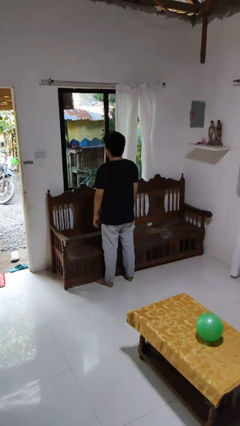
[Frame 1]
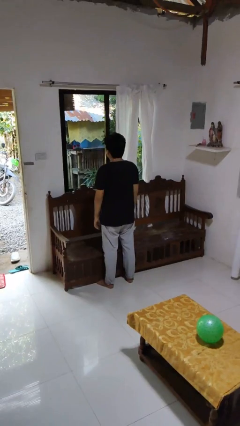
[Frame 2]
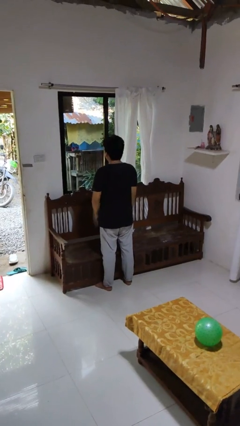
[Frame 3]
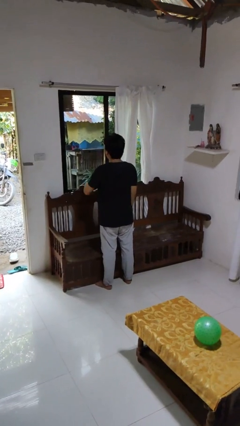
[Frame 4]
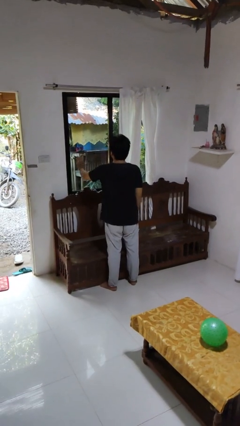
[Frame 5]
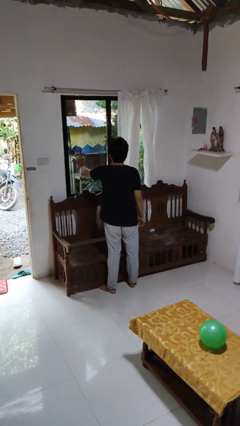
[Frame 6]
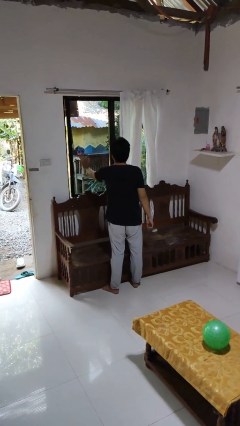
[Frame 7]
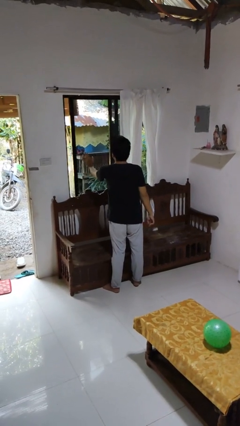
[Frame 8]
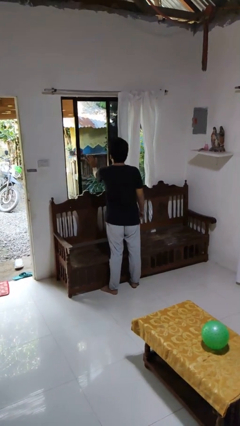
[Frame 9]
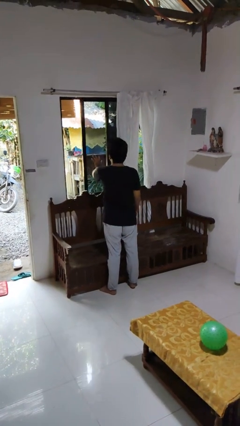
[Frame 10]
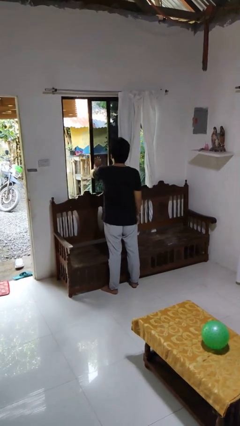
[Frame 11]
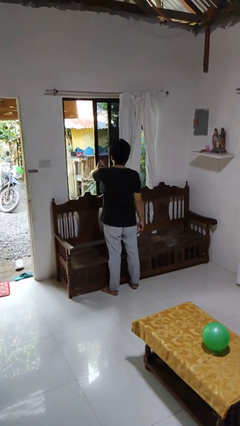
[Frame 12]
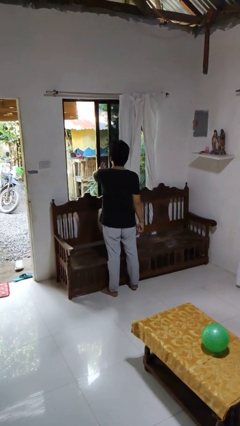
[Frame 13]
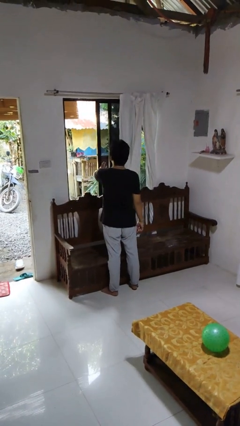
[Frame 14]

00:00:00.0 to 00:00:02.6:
person opens home window

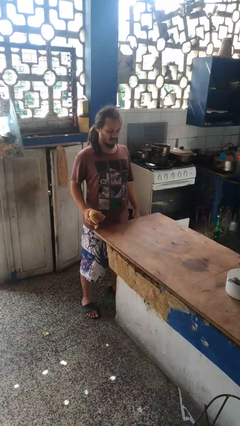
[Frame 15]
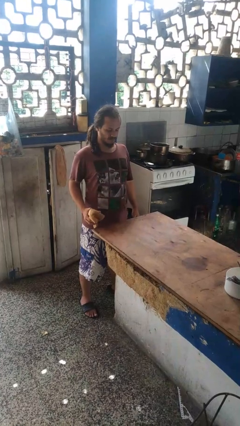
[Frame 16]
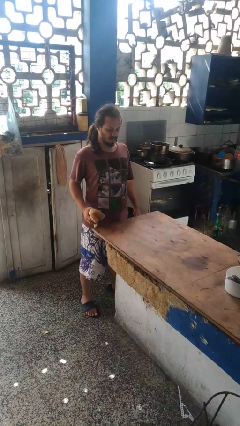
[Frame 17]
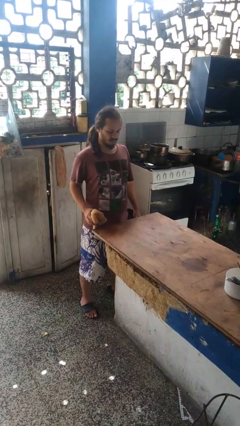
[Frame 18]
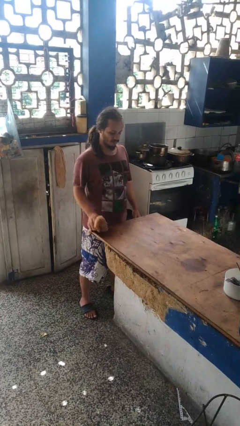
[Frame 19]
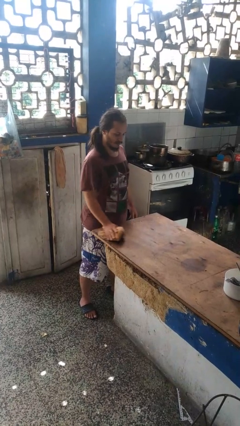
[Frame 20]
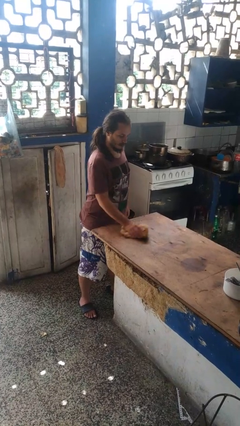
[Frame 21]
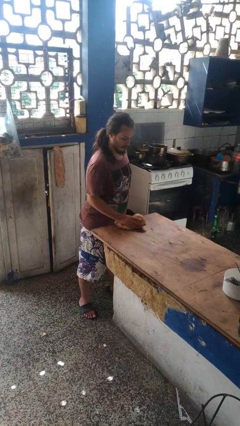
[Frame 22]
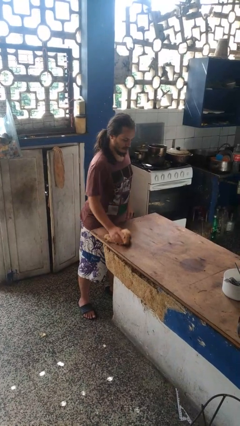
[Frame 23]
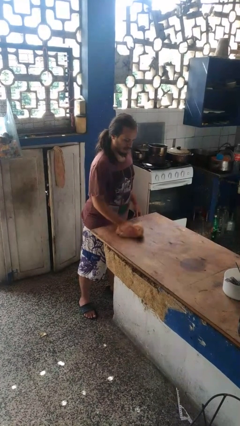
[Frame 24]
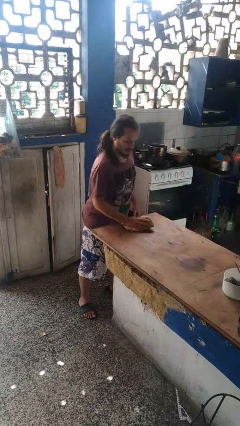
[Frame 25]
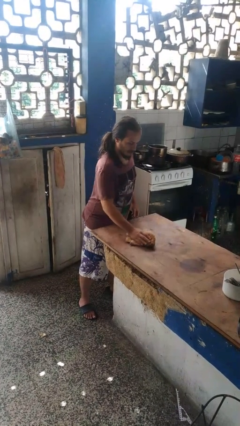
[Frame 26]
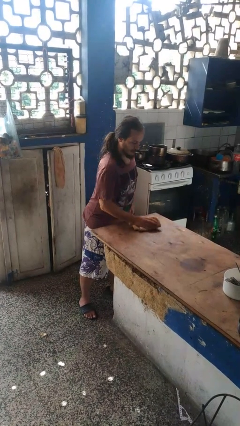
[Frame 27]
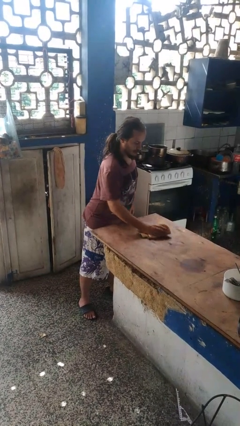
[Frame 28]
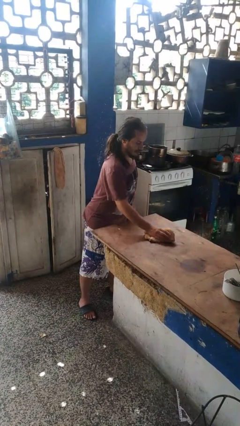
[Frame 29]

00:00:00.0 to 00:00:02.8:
person cleans table with rag

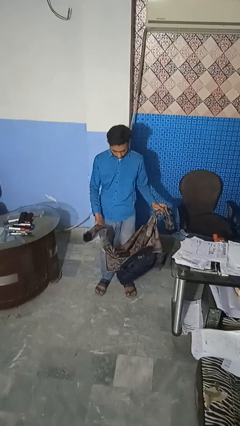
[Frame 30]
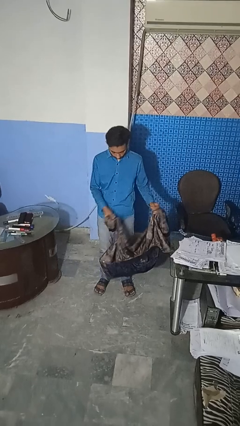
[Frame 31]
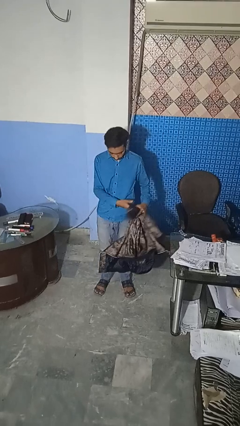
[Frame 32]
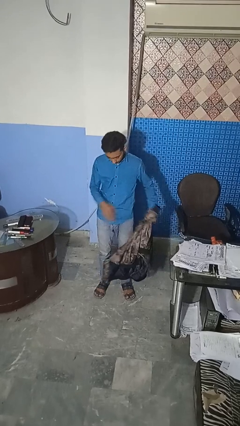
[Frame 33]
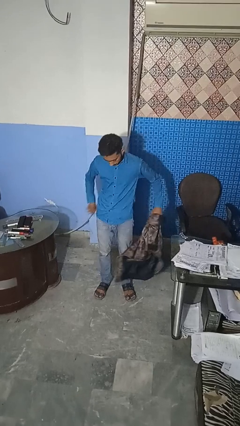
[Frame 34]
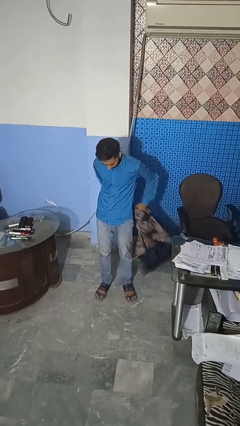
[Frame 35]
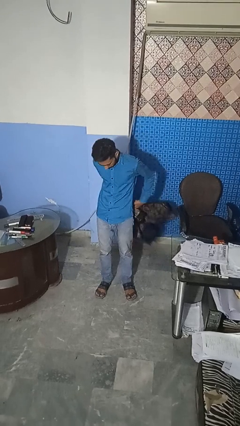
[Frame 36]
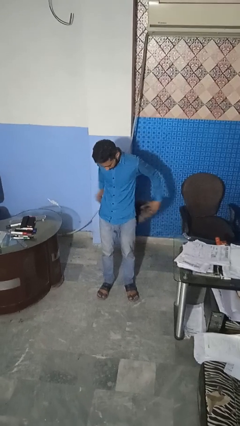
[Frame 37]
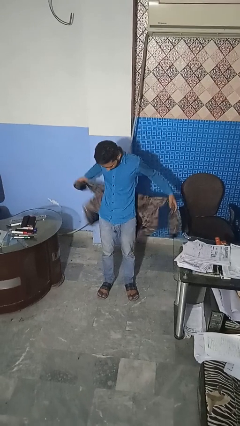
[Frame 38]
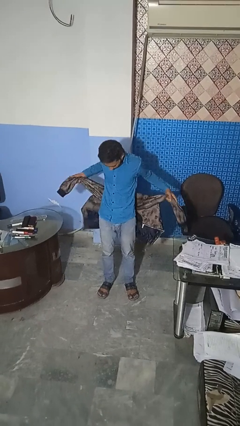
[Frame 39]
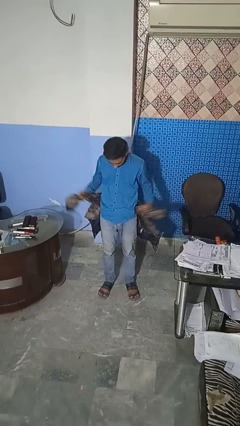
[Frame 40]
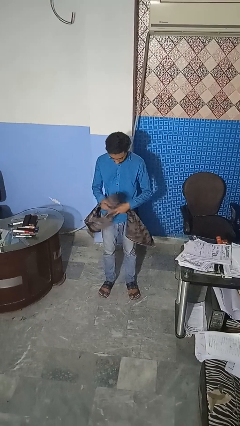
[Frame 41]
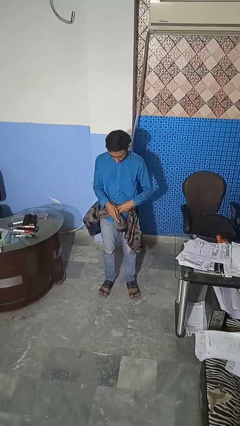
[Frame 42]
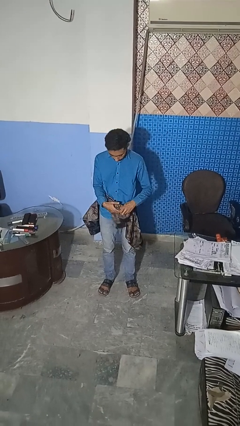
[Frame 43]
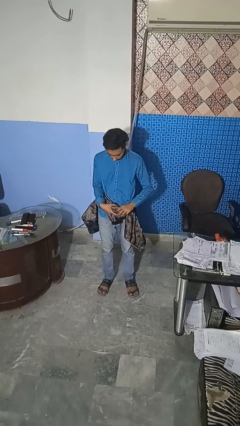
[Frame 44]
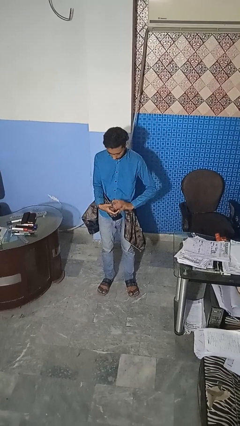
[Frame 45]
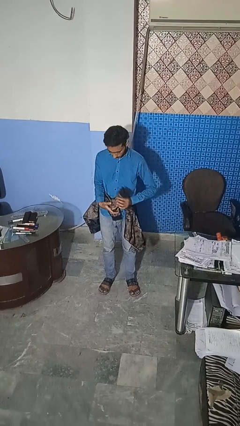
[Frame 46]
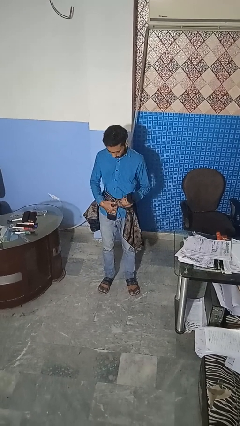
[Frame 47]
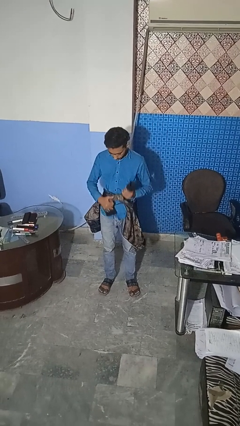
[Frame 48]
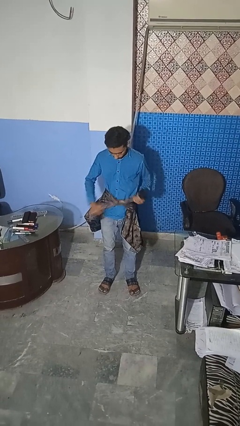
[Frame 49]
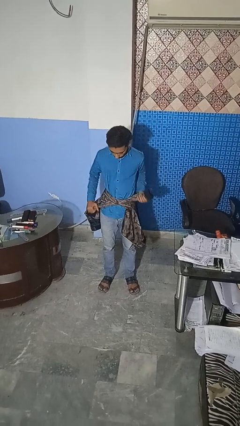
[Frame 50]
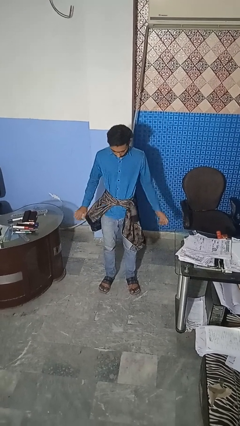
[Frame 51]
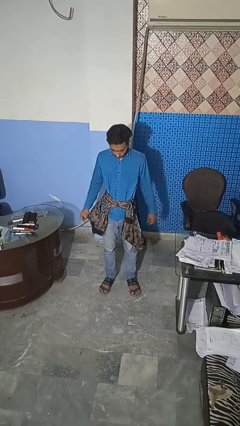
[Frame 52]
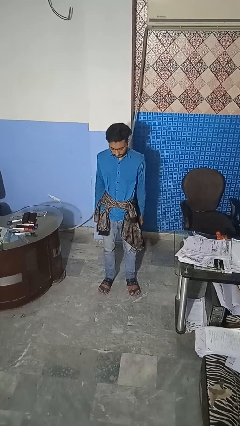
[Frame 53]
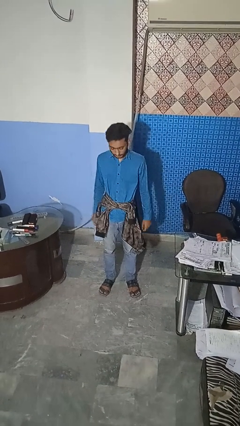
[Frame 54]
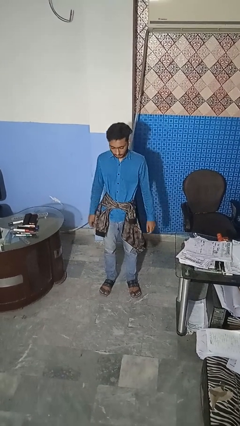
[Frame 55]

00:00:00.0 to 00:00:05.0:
person ties jacket around waist

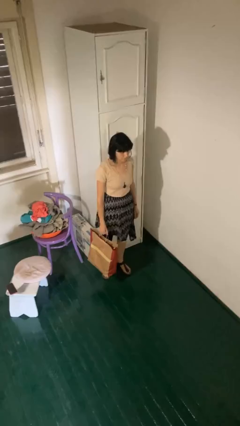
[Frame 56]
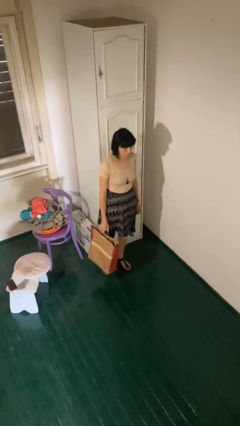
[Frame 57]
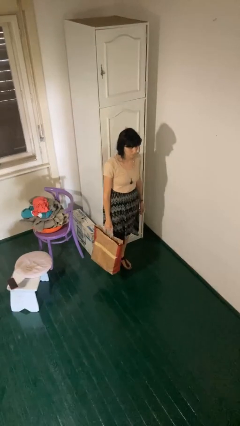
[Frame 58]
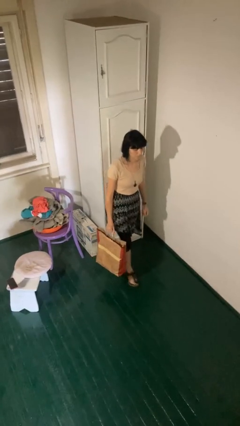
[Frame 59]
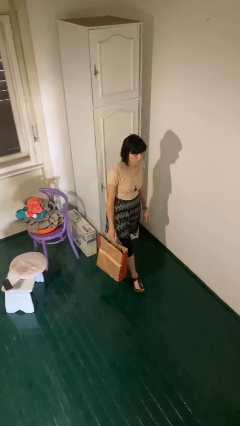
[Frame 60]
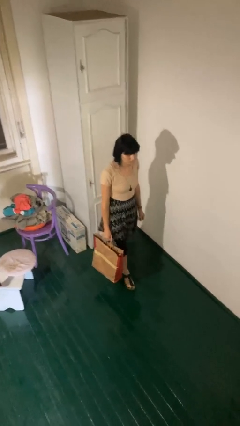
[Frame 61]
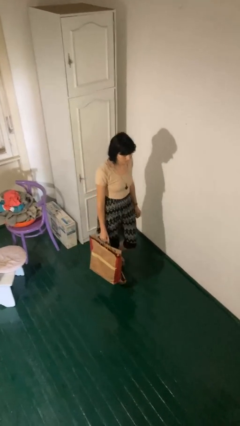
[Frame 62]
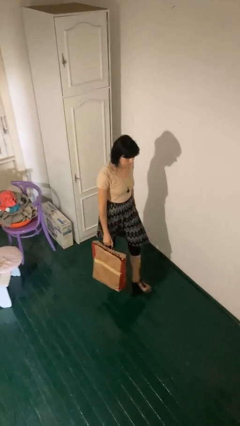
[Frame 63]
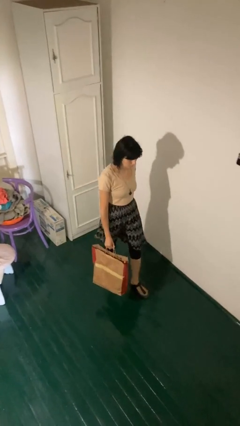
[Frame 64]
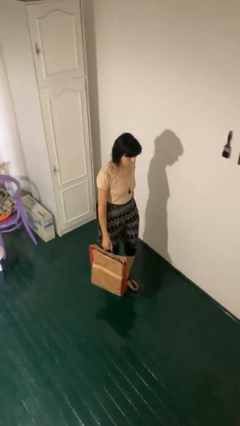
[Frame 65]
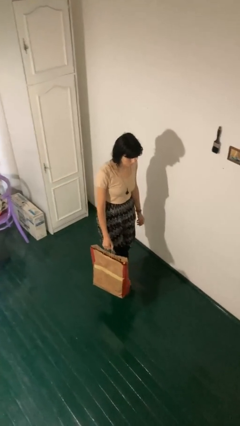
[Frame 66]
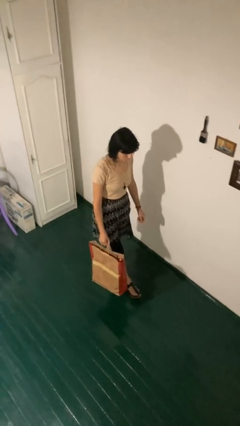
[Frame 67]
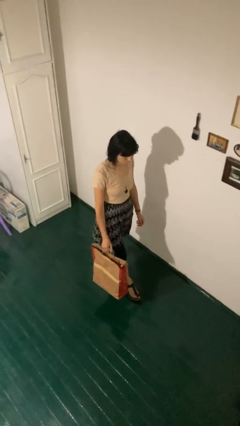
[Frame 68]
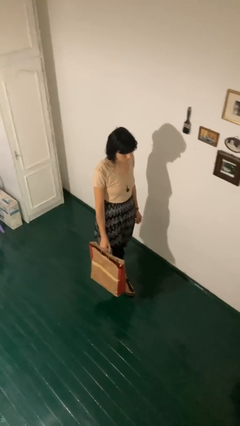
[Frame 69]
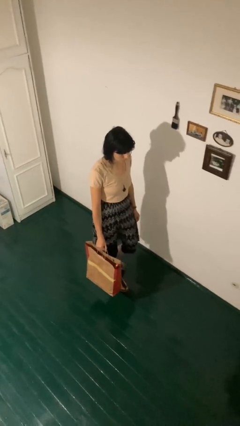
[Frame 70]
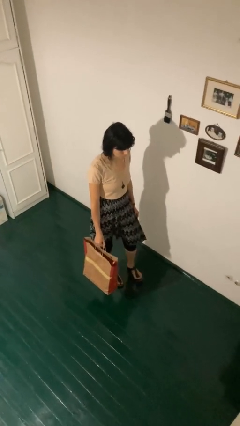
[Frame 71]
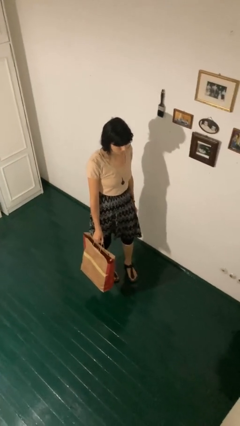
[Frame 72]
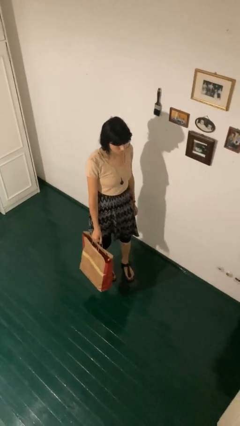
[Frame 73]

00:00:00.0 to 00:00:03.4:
person carries groceries

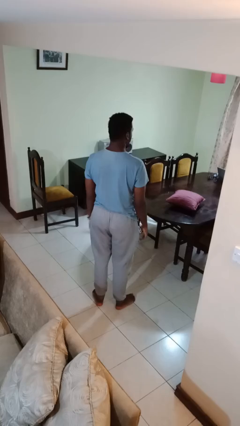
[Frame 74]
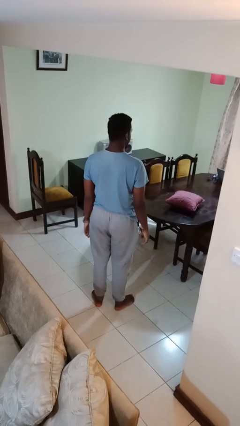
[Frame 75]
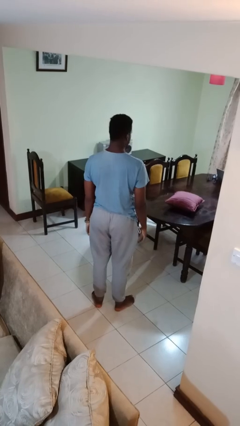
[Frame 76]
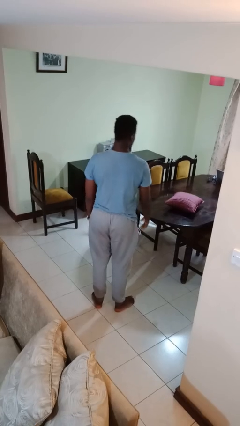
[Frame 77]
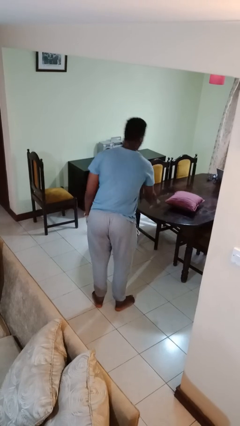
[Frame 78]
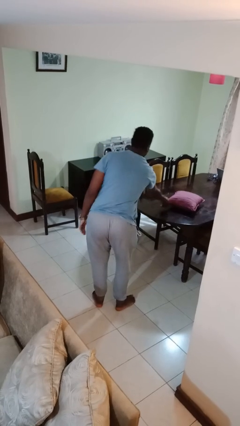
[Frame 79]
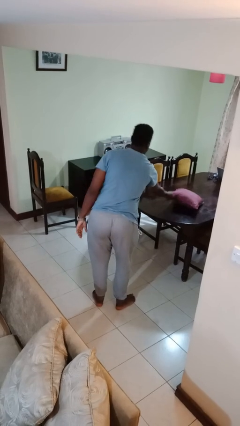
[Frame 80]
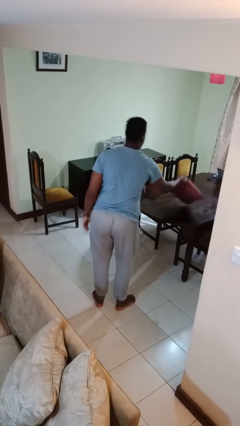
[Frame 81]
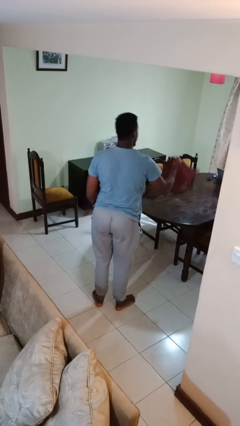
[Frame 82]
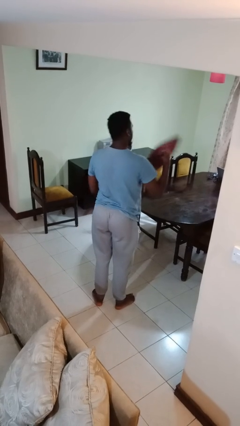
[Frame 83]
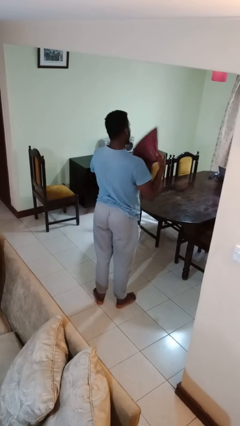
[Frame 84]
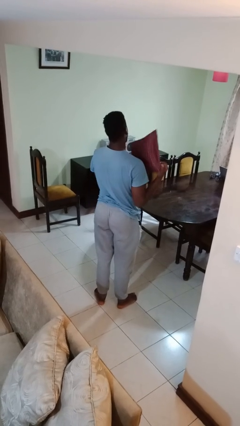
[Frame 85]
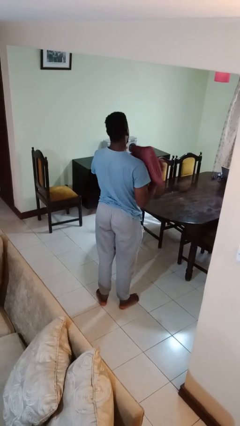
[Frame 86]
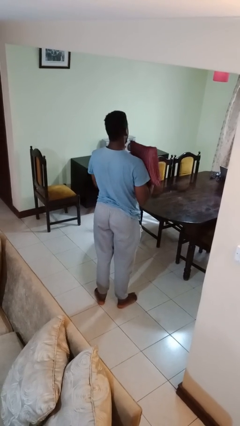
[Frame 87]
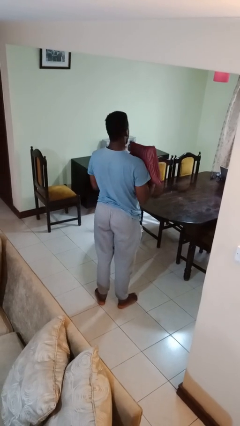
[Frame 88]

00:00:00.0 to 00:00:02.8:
person picks up object from table

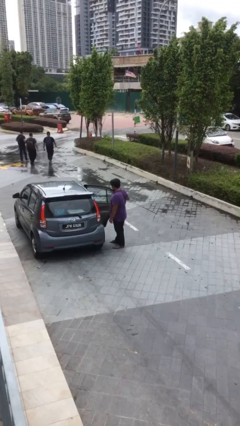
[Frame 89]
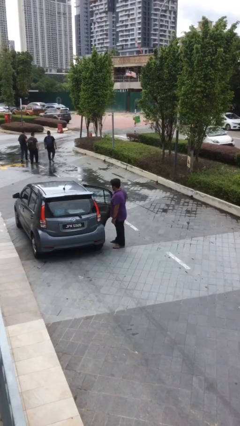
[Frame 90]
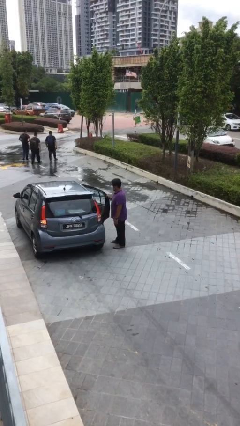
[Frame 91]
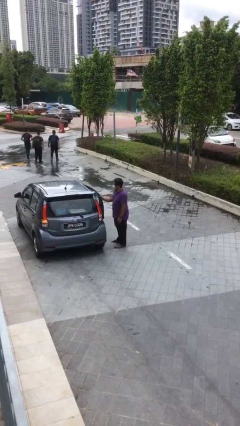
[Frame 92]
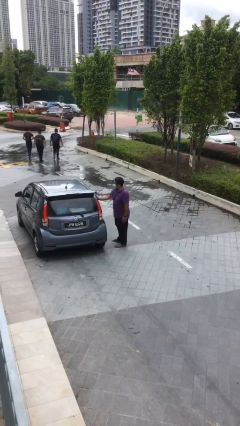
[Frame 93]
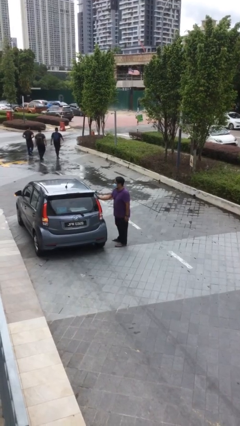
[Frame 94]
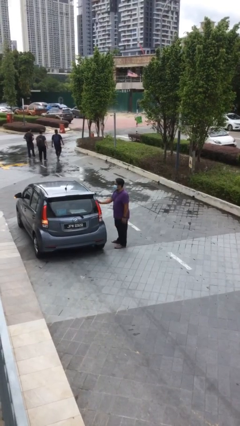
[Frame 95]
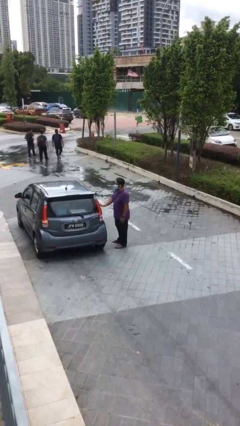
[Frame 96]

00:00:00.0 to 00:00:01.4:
person closes car door
